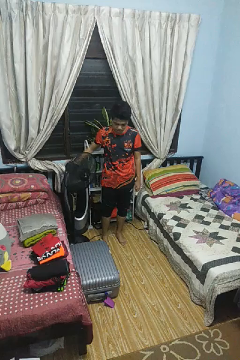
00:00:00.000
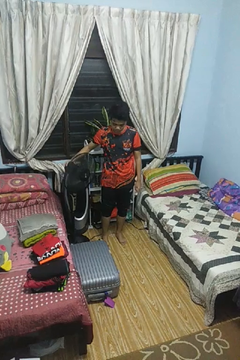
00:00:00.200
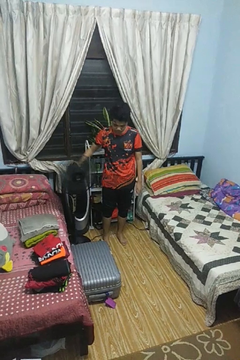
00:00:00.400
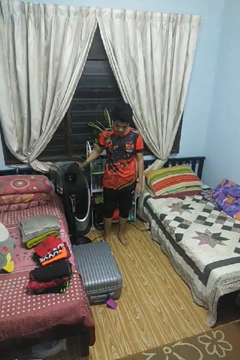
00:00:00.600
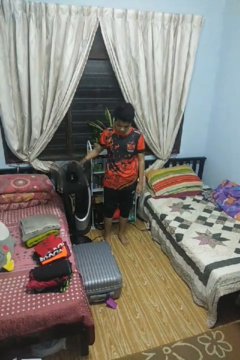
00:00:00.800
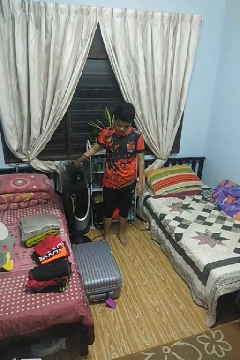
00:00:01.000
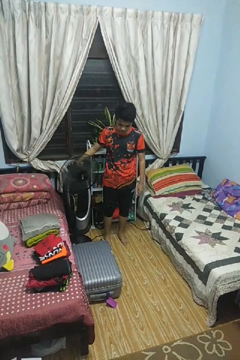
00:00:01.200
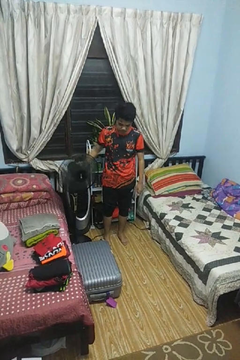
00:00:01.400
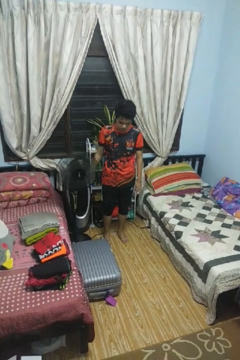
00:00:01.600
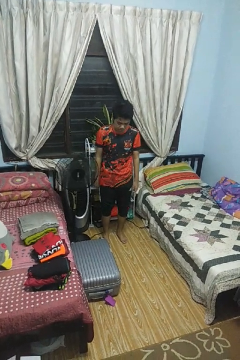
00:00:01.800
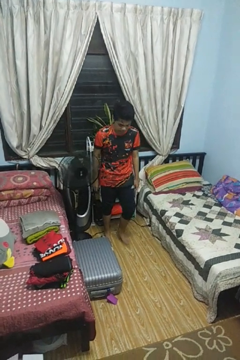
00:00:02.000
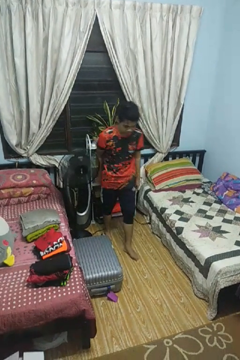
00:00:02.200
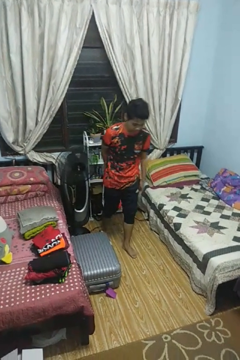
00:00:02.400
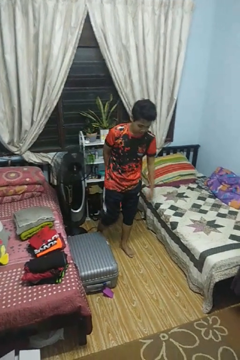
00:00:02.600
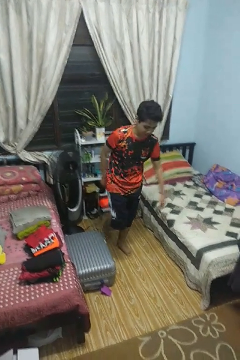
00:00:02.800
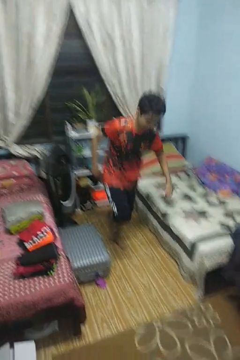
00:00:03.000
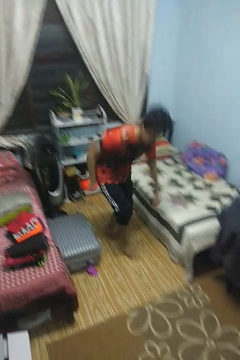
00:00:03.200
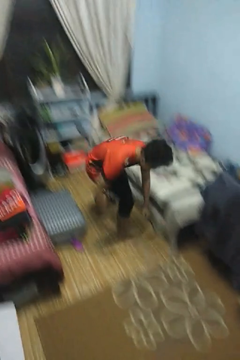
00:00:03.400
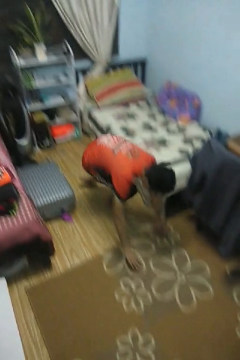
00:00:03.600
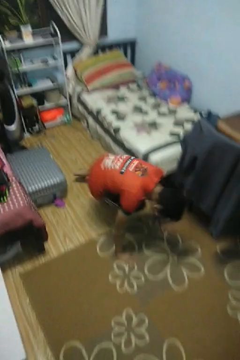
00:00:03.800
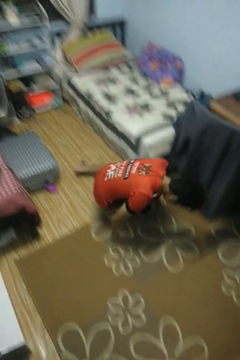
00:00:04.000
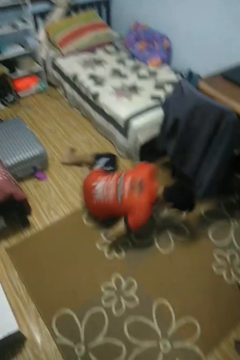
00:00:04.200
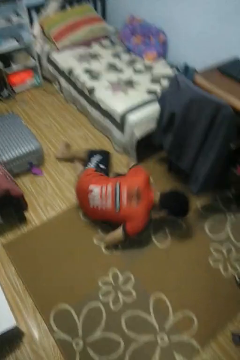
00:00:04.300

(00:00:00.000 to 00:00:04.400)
person trips on object on floor

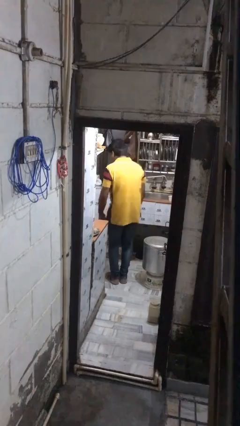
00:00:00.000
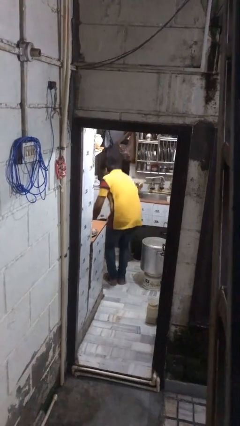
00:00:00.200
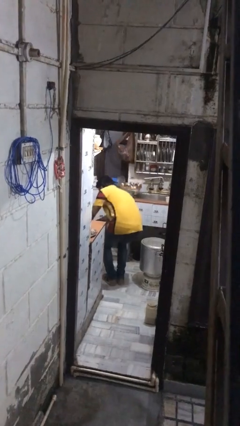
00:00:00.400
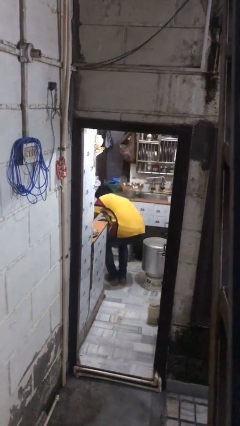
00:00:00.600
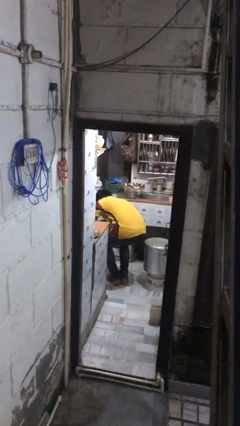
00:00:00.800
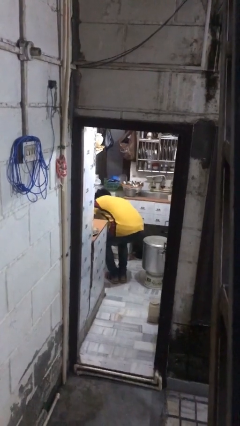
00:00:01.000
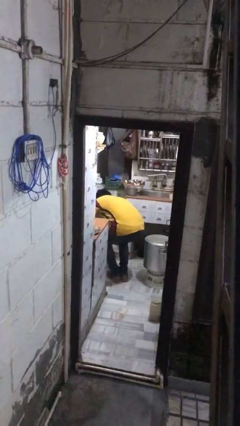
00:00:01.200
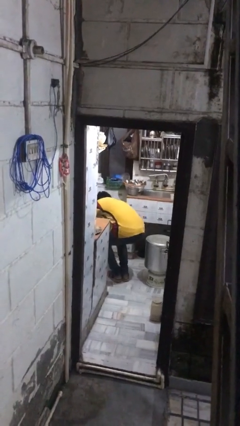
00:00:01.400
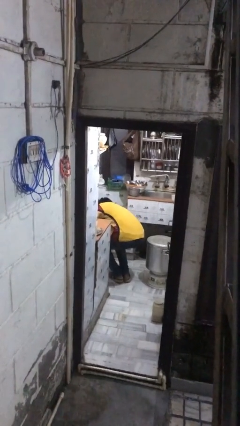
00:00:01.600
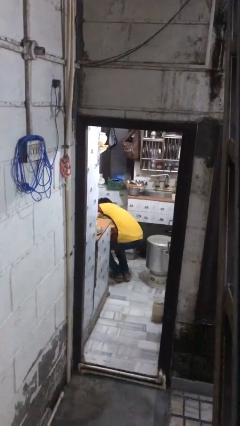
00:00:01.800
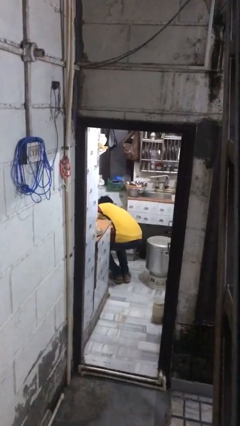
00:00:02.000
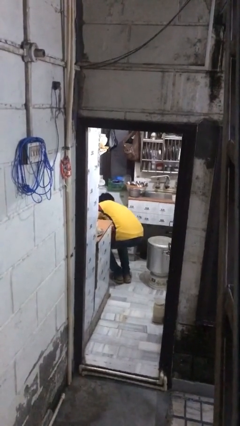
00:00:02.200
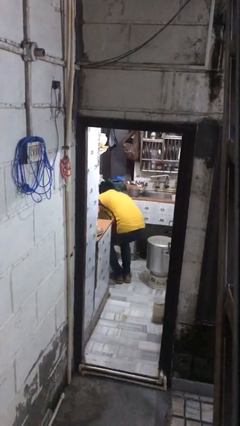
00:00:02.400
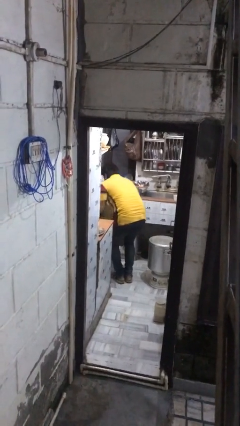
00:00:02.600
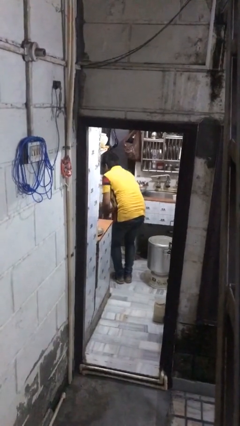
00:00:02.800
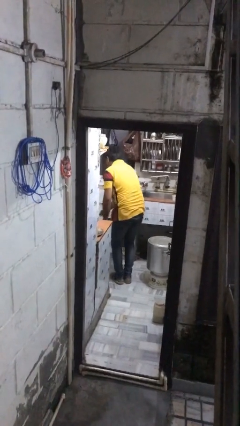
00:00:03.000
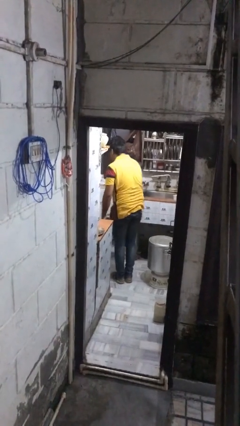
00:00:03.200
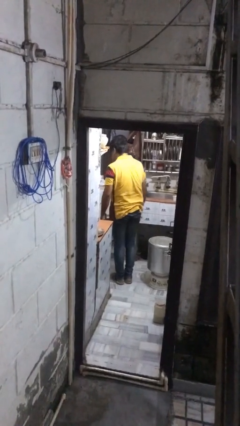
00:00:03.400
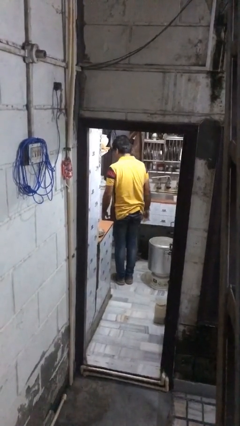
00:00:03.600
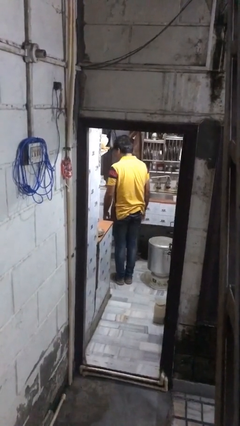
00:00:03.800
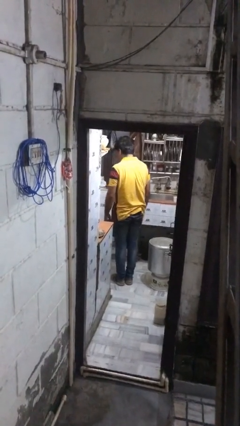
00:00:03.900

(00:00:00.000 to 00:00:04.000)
person searches in kitchen drawer

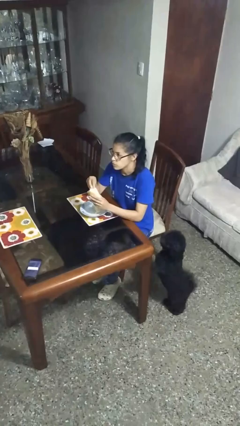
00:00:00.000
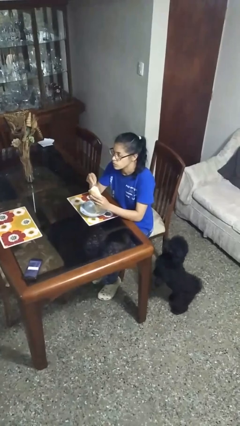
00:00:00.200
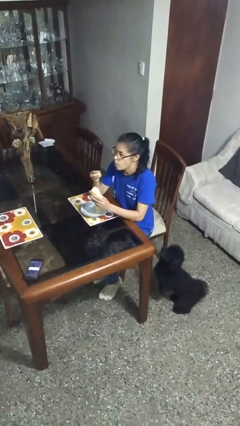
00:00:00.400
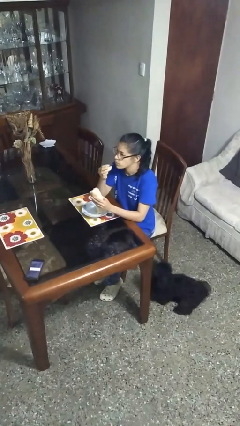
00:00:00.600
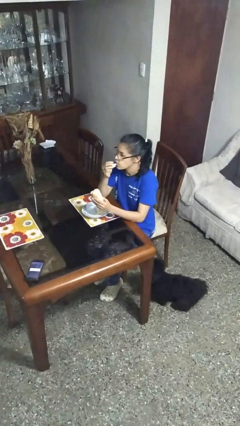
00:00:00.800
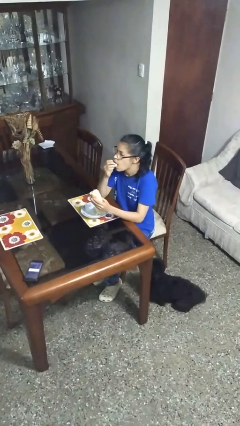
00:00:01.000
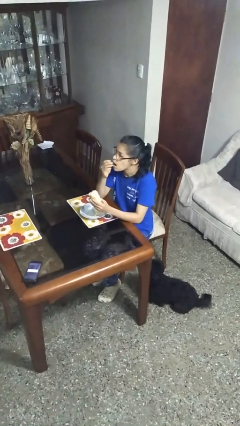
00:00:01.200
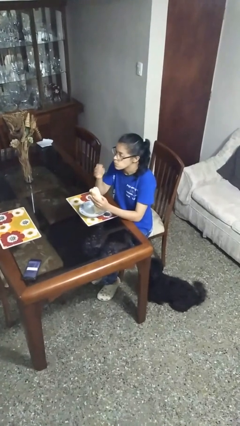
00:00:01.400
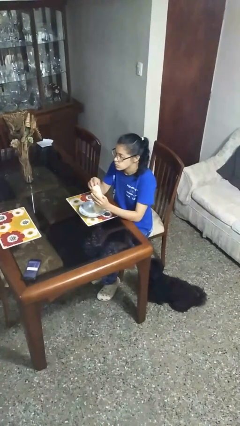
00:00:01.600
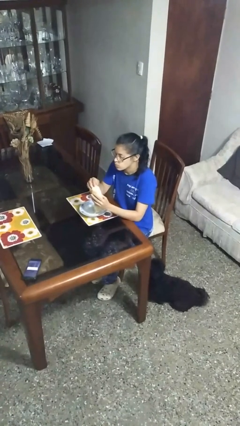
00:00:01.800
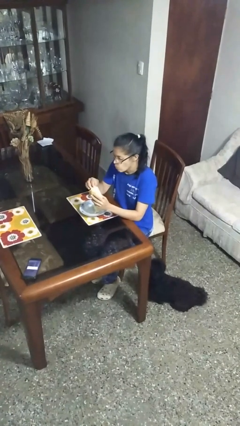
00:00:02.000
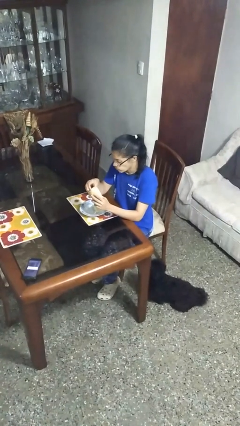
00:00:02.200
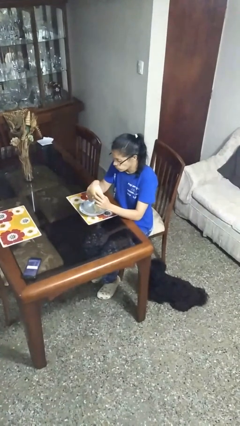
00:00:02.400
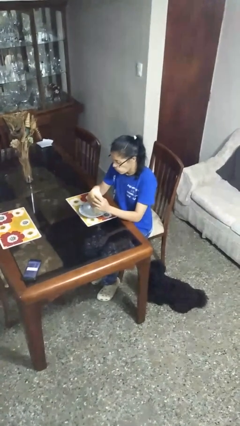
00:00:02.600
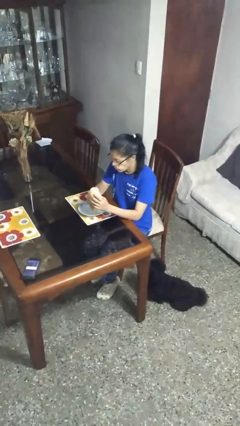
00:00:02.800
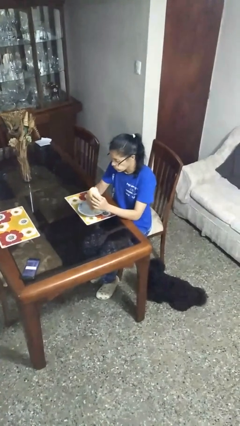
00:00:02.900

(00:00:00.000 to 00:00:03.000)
person eats with hands

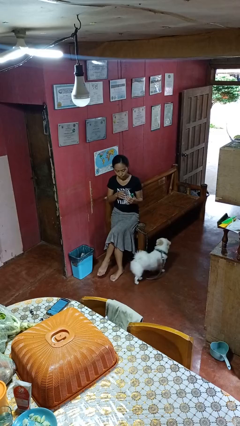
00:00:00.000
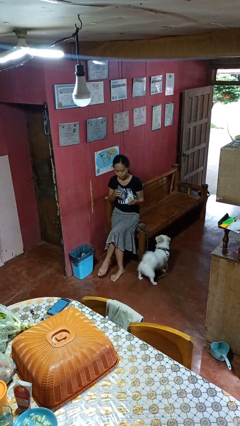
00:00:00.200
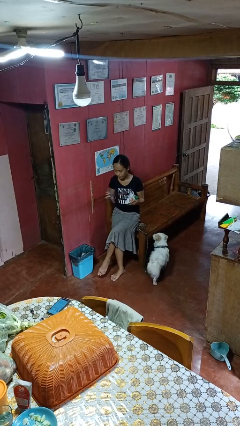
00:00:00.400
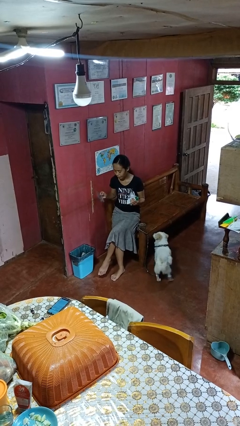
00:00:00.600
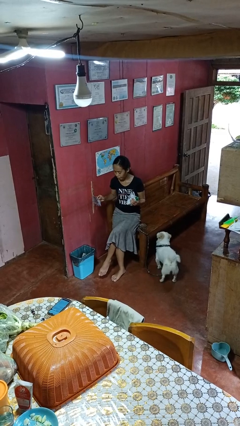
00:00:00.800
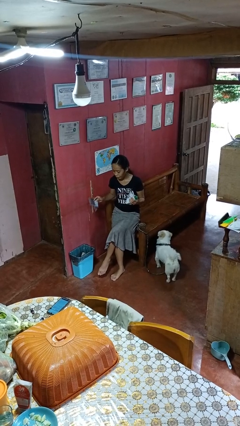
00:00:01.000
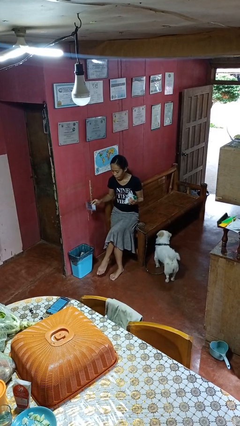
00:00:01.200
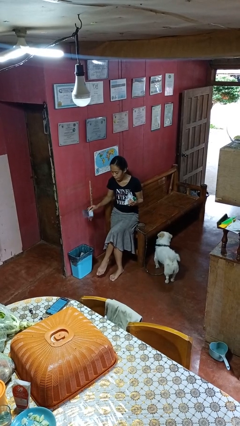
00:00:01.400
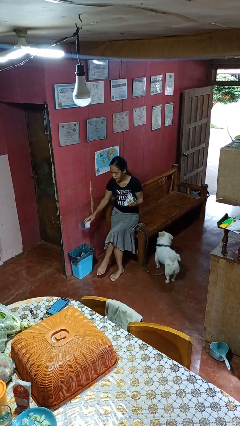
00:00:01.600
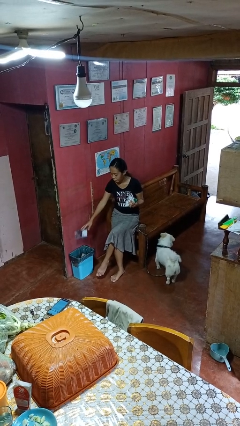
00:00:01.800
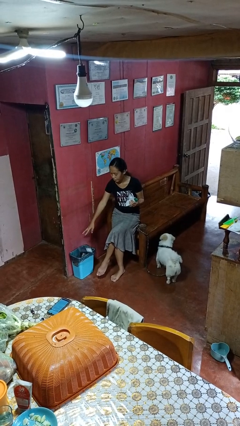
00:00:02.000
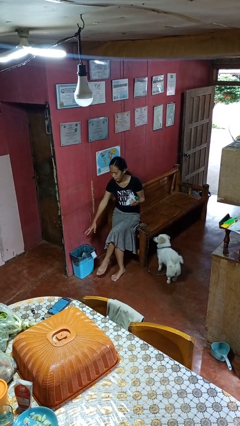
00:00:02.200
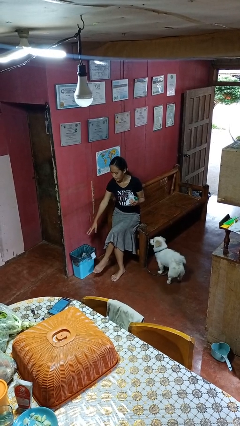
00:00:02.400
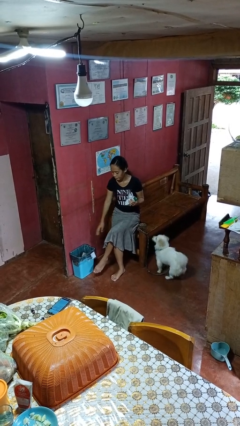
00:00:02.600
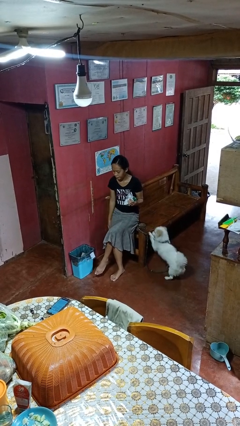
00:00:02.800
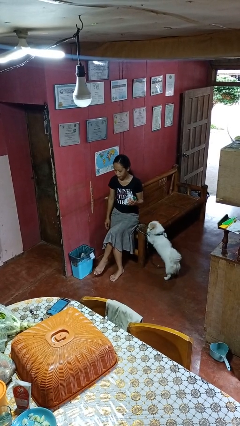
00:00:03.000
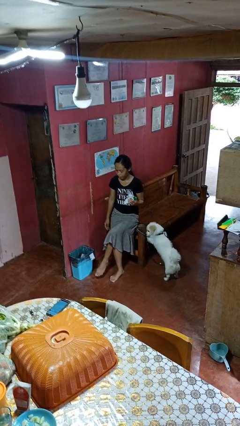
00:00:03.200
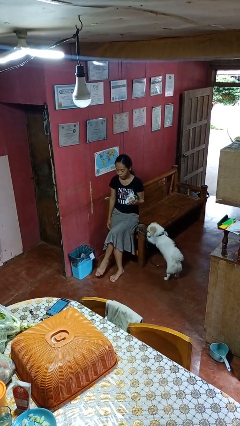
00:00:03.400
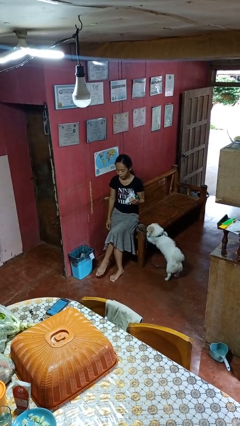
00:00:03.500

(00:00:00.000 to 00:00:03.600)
person discards trash

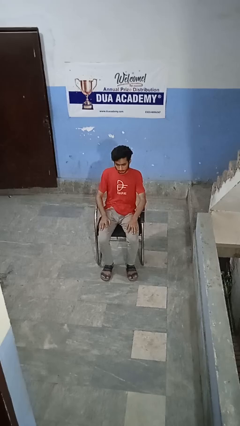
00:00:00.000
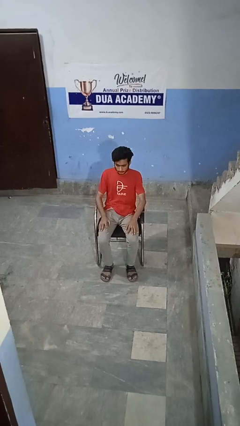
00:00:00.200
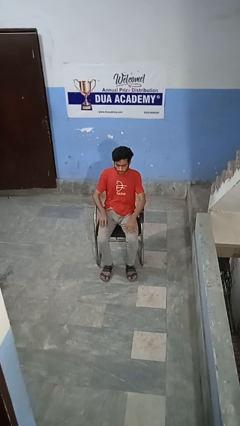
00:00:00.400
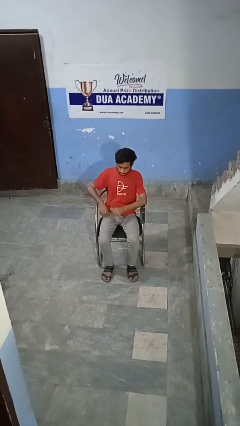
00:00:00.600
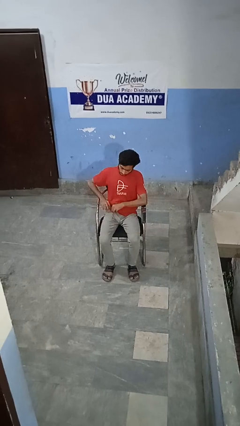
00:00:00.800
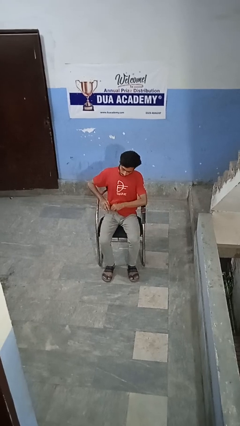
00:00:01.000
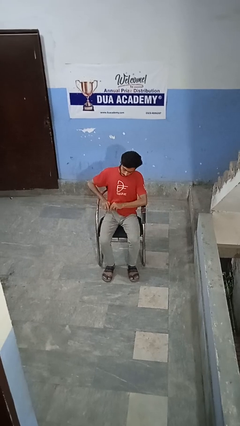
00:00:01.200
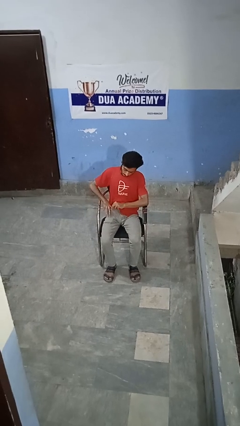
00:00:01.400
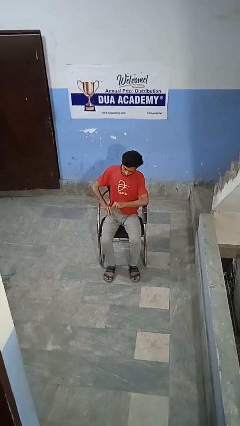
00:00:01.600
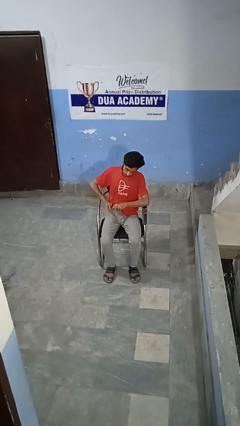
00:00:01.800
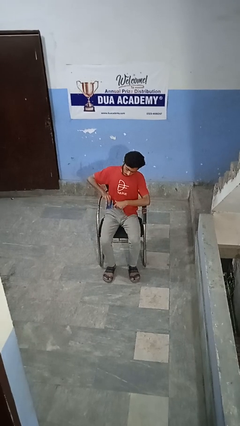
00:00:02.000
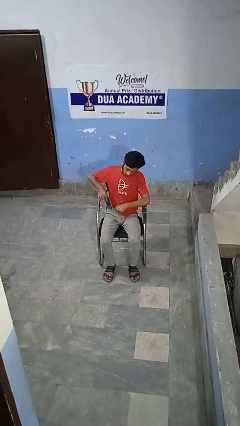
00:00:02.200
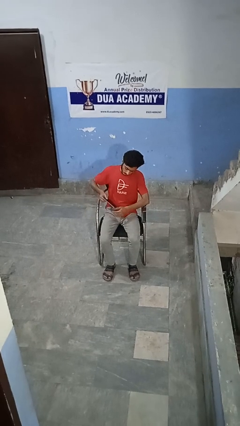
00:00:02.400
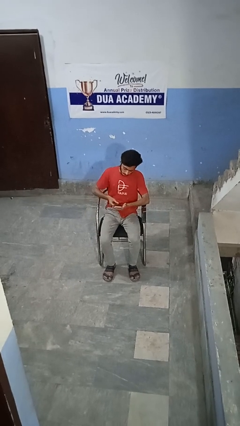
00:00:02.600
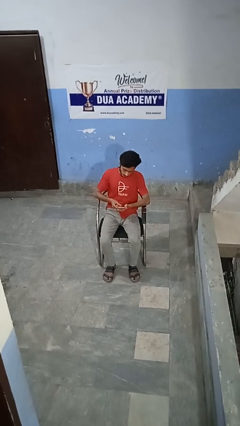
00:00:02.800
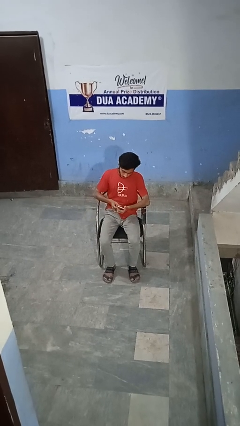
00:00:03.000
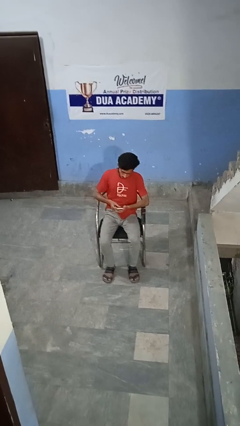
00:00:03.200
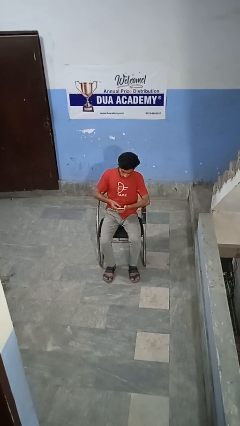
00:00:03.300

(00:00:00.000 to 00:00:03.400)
person takes phone from pocket
